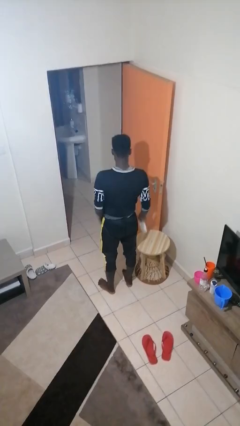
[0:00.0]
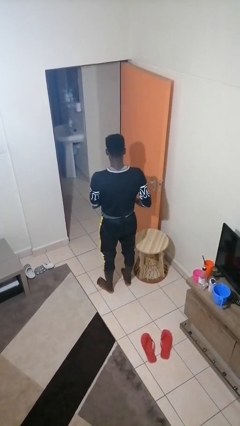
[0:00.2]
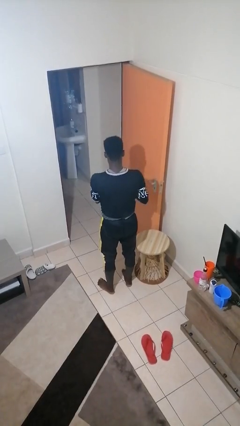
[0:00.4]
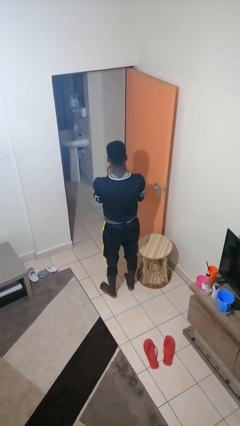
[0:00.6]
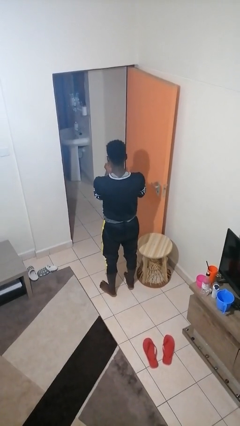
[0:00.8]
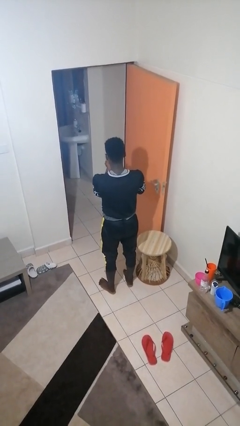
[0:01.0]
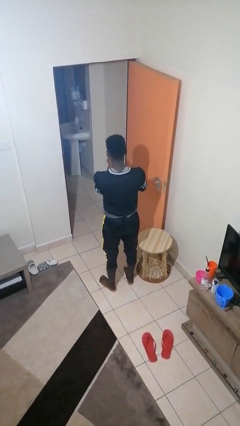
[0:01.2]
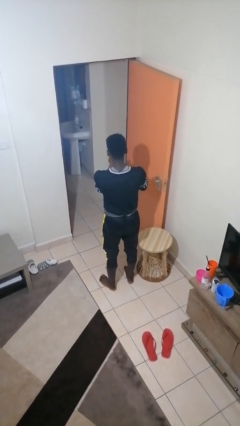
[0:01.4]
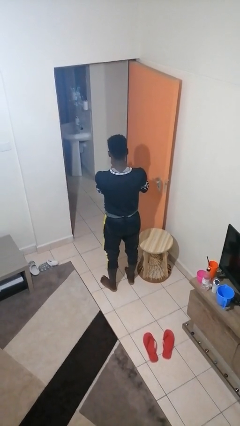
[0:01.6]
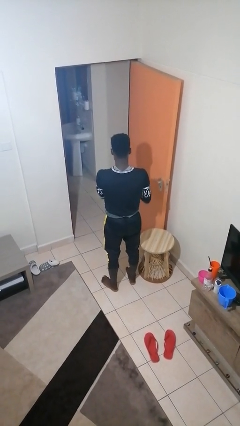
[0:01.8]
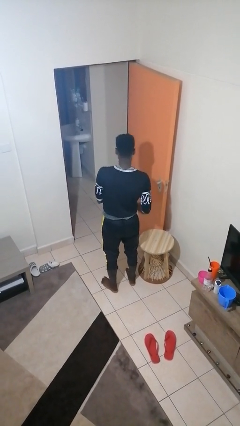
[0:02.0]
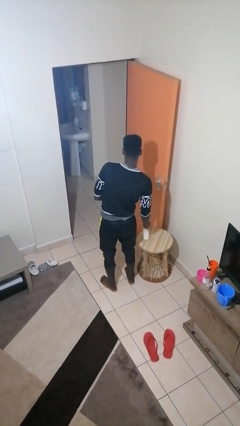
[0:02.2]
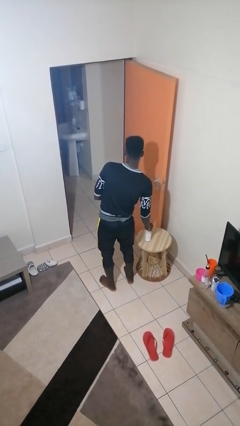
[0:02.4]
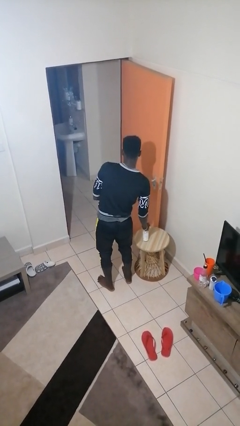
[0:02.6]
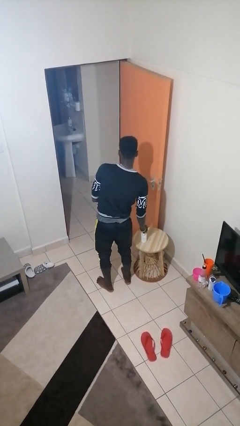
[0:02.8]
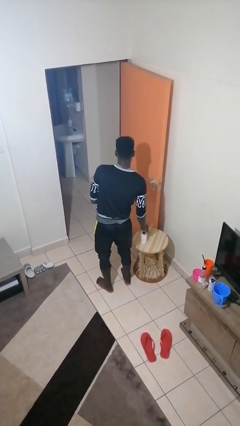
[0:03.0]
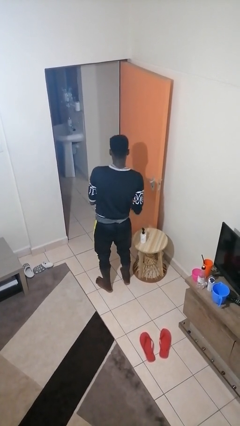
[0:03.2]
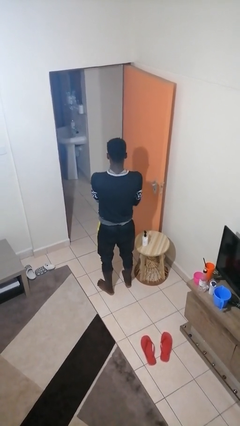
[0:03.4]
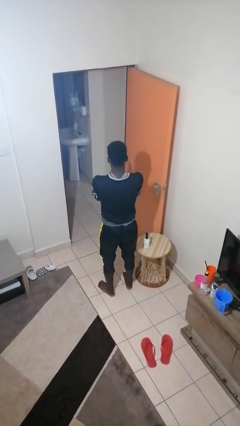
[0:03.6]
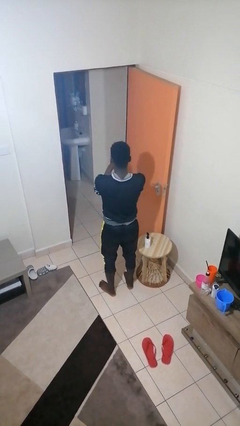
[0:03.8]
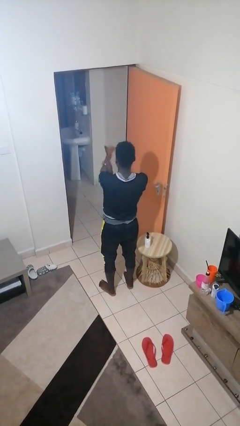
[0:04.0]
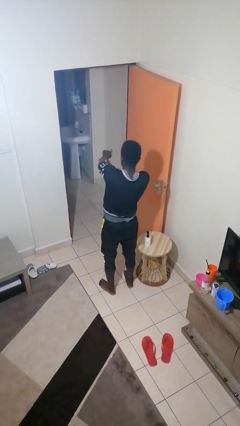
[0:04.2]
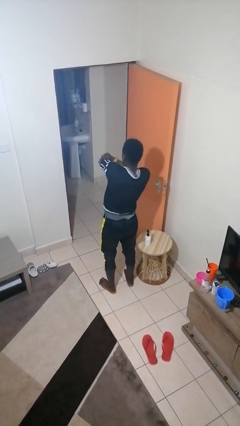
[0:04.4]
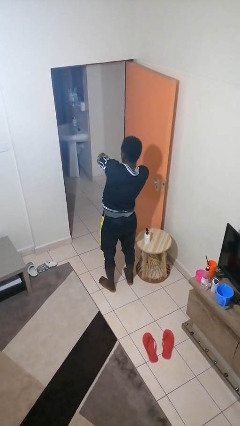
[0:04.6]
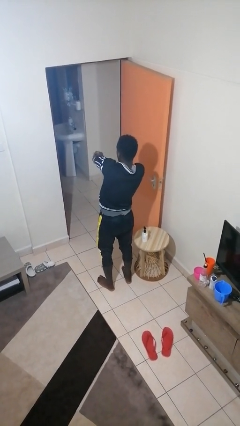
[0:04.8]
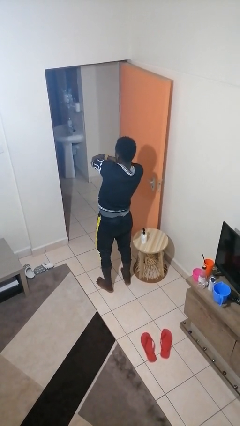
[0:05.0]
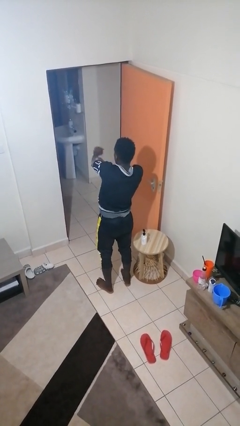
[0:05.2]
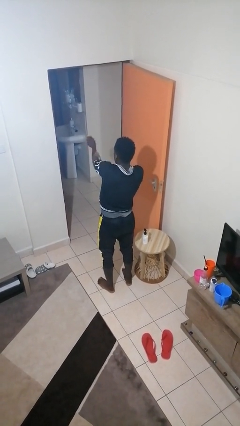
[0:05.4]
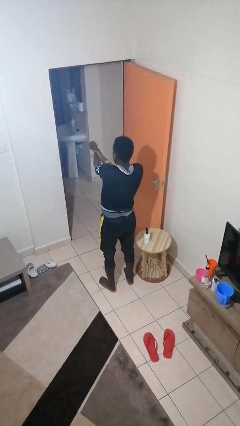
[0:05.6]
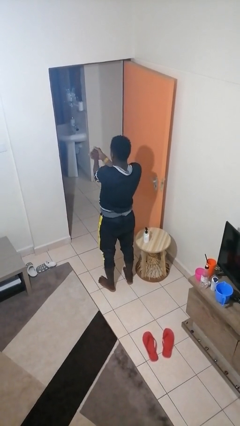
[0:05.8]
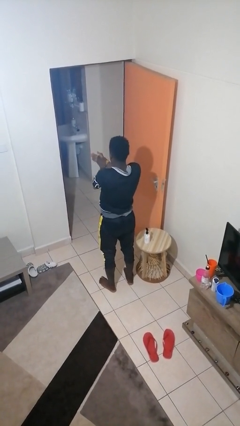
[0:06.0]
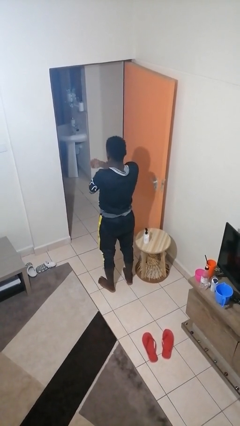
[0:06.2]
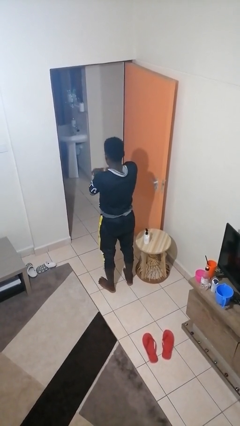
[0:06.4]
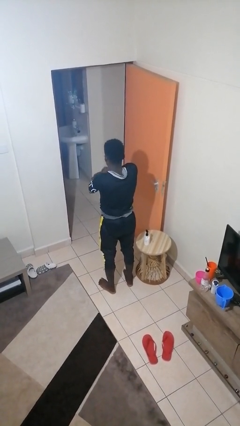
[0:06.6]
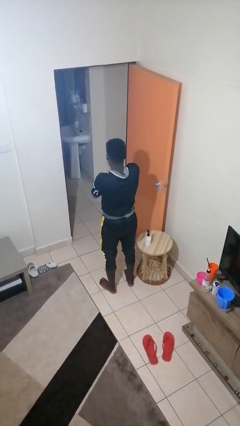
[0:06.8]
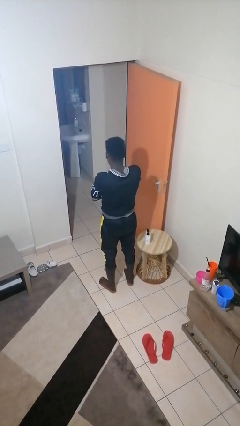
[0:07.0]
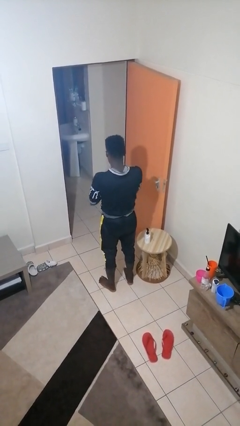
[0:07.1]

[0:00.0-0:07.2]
person applies sunscreen

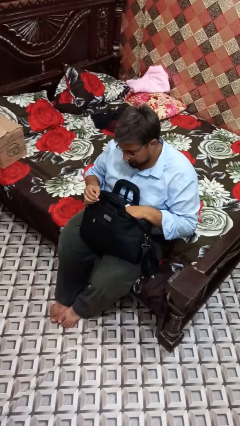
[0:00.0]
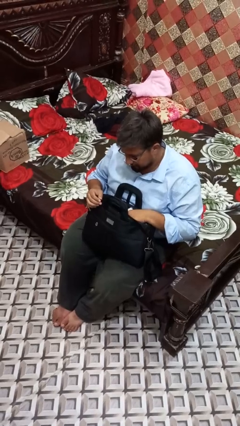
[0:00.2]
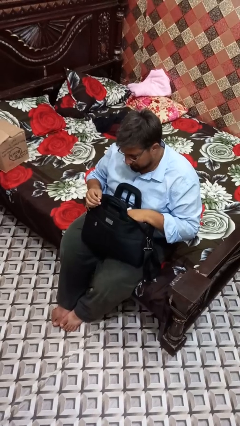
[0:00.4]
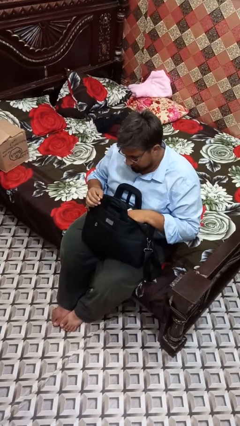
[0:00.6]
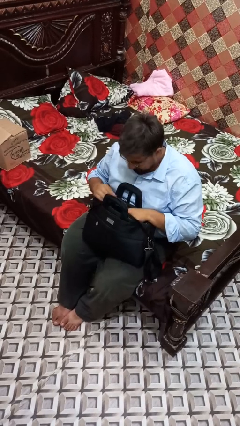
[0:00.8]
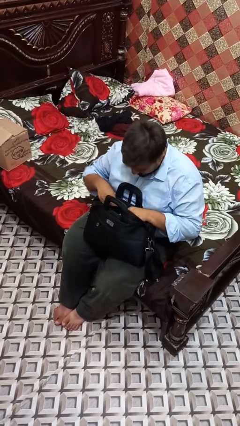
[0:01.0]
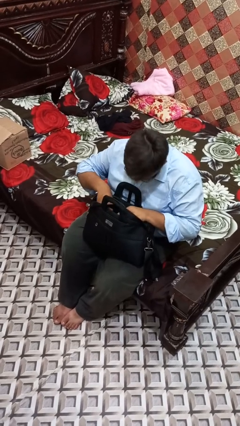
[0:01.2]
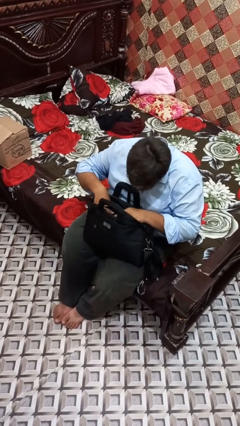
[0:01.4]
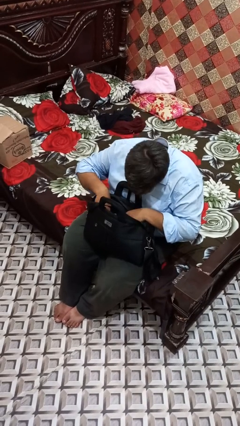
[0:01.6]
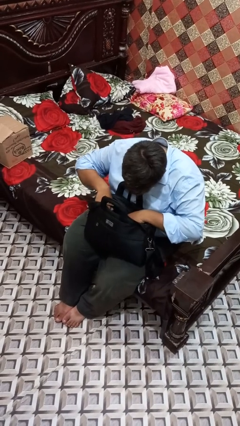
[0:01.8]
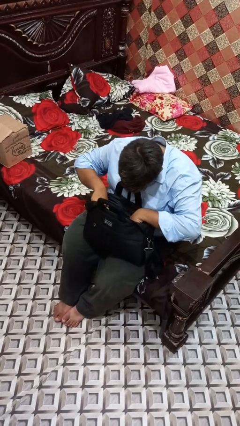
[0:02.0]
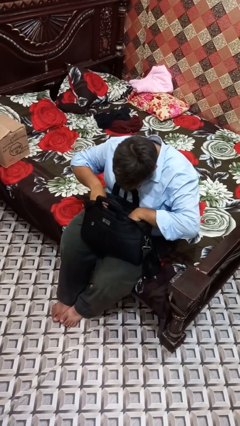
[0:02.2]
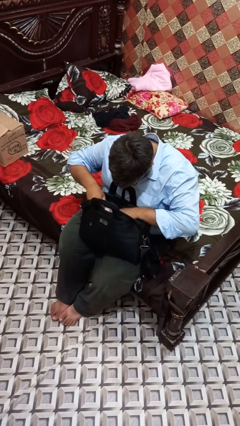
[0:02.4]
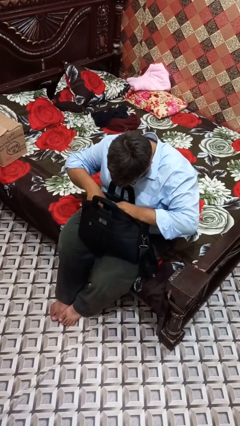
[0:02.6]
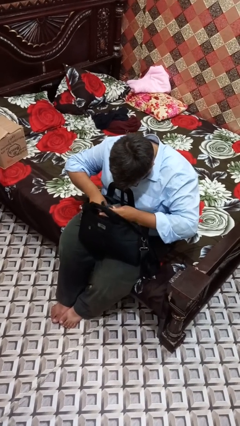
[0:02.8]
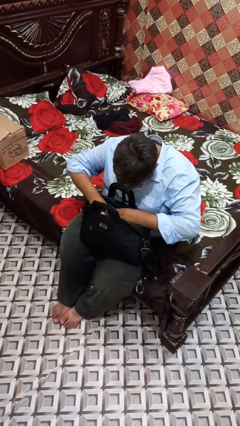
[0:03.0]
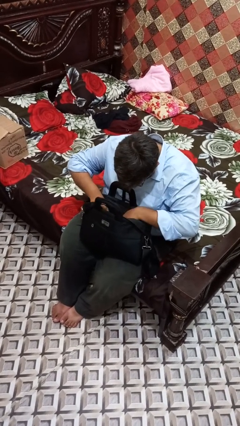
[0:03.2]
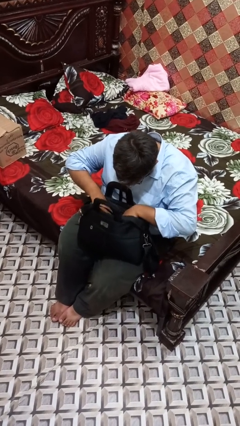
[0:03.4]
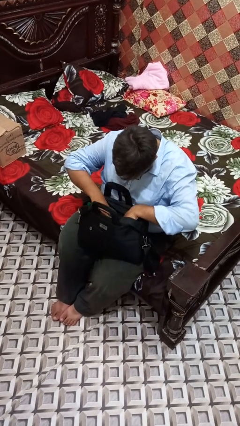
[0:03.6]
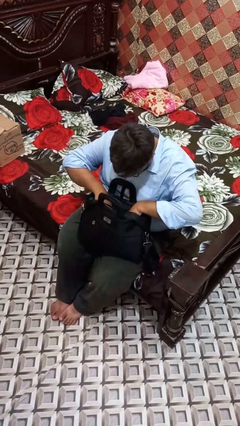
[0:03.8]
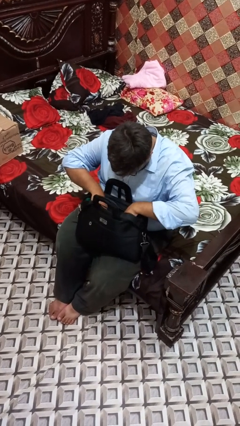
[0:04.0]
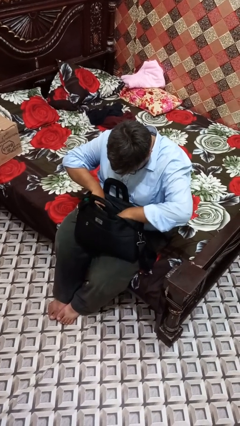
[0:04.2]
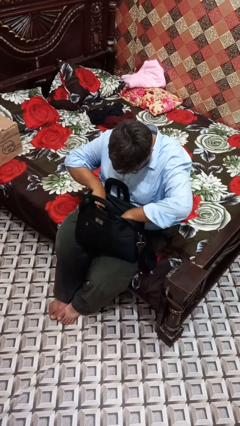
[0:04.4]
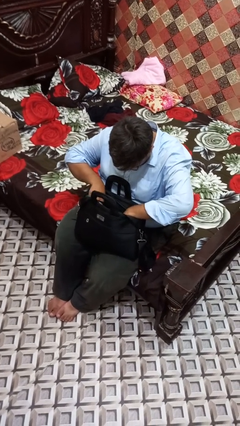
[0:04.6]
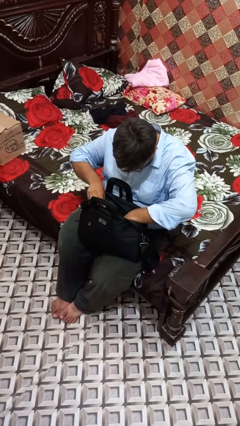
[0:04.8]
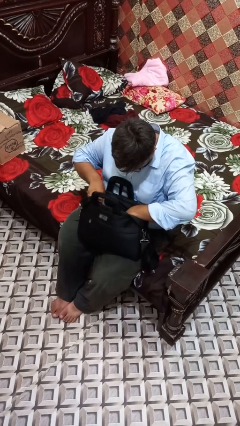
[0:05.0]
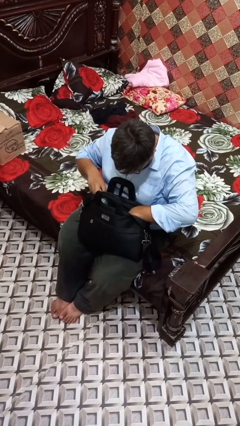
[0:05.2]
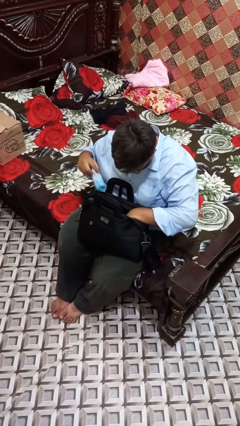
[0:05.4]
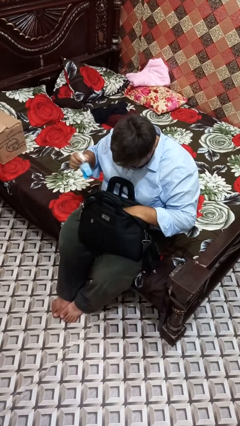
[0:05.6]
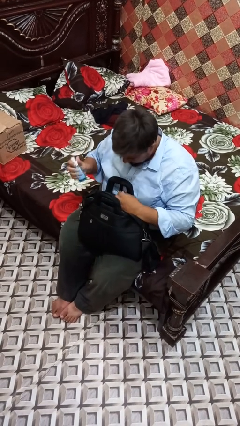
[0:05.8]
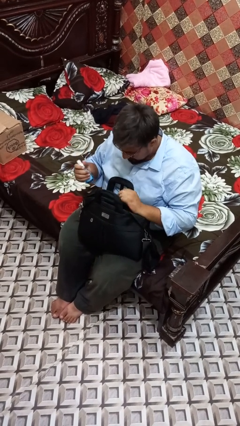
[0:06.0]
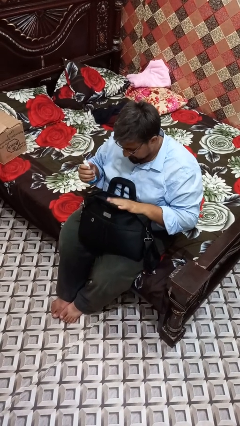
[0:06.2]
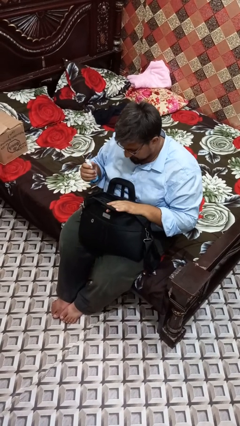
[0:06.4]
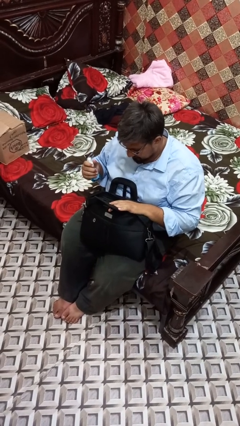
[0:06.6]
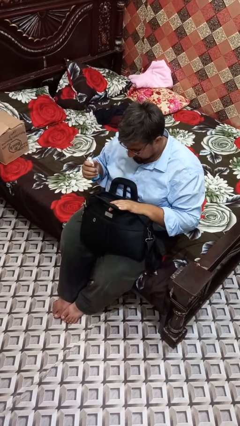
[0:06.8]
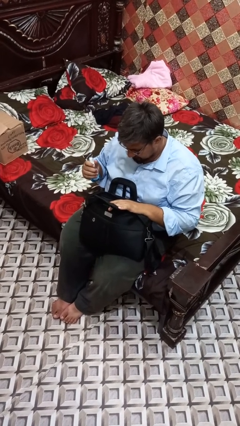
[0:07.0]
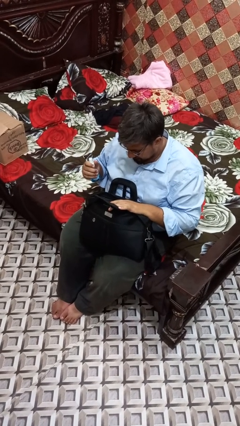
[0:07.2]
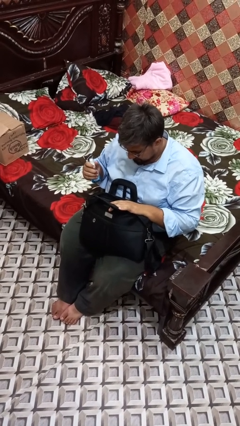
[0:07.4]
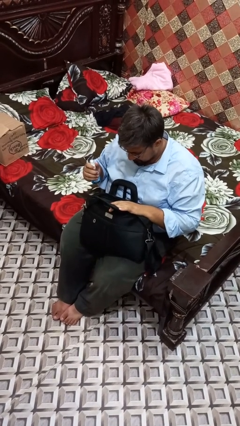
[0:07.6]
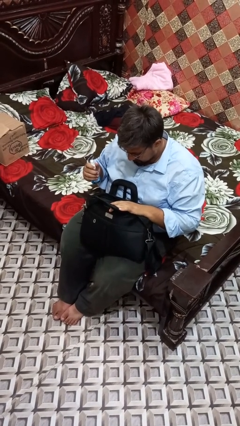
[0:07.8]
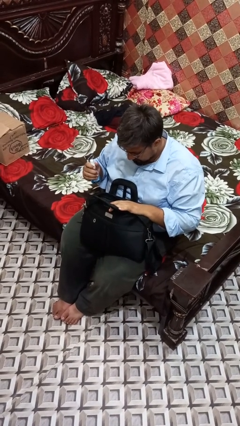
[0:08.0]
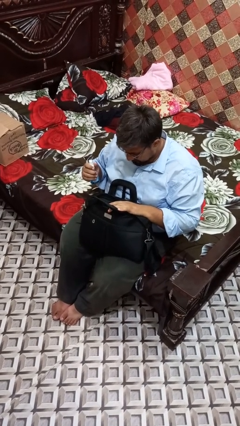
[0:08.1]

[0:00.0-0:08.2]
person searches in bag

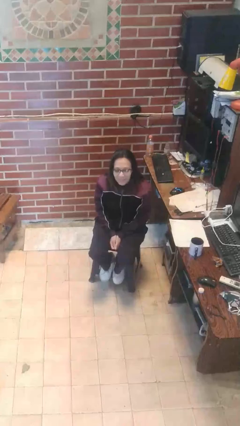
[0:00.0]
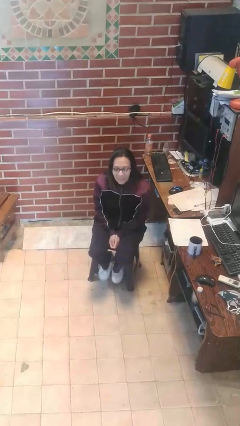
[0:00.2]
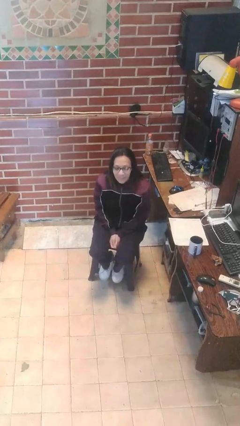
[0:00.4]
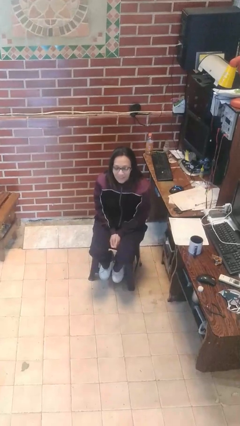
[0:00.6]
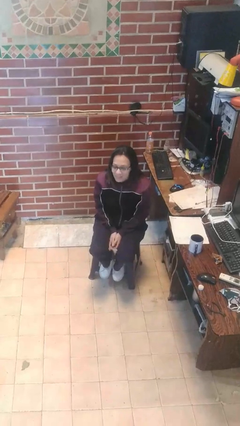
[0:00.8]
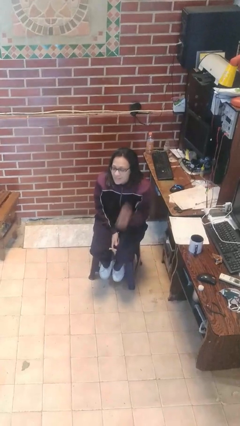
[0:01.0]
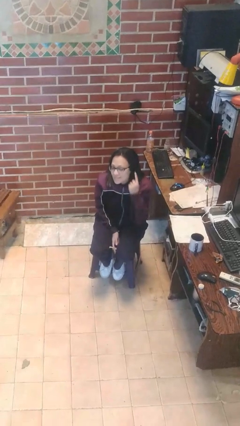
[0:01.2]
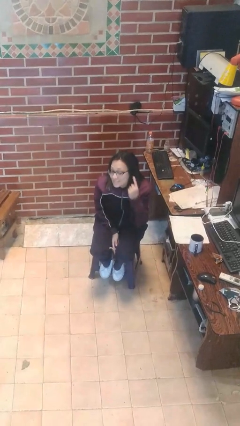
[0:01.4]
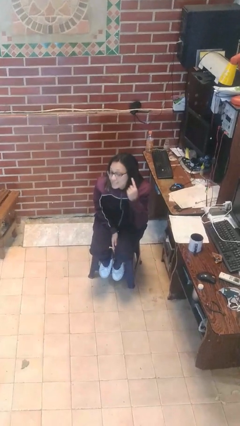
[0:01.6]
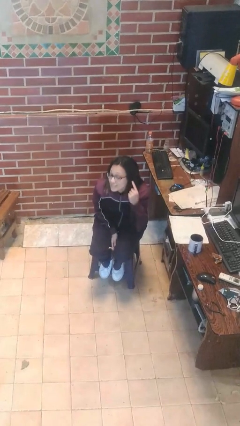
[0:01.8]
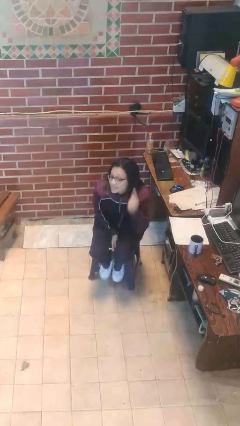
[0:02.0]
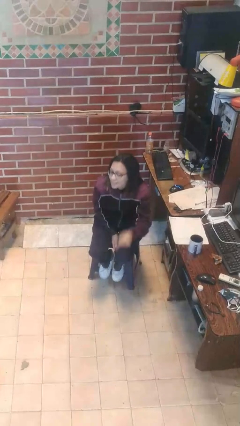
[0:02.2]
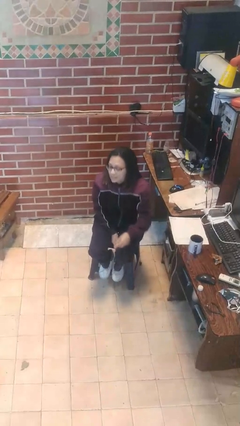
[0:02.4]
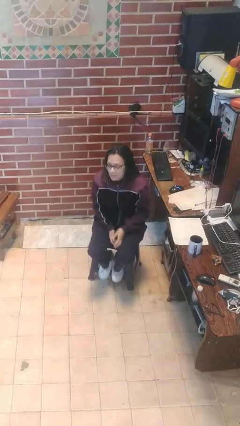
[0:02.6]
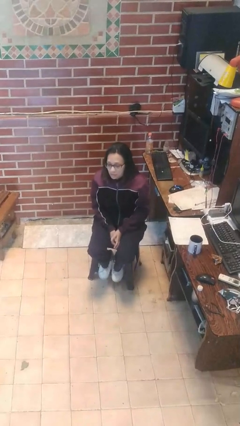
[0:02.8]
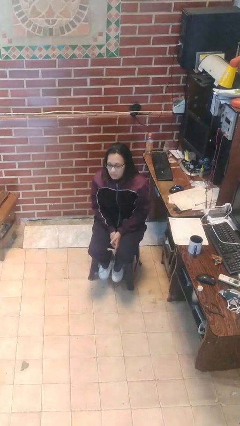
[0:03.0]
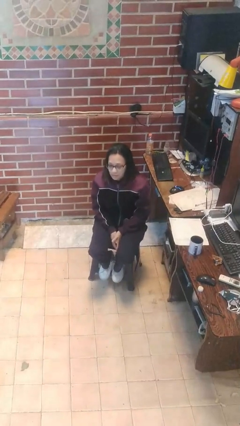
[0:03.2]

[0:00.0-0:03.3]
person gestures listen closely
